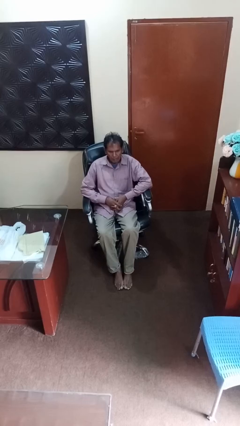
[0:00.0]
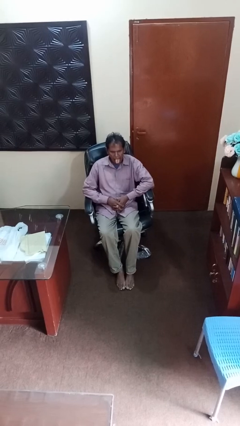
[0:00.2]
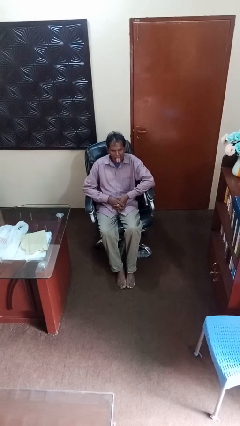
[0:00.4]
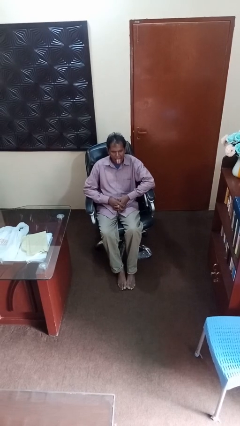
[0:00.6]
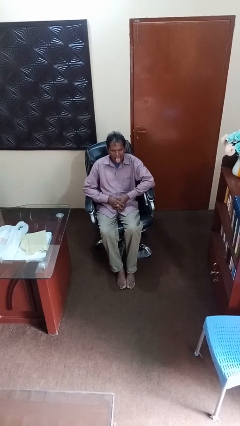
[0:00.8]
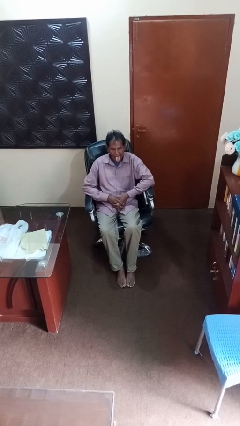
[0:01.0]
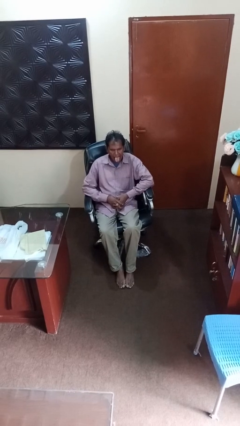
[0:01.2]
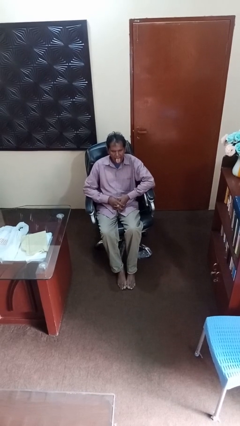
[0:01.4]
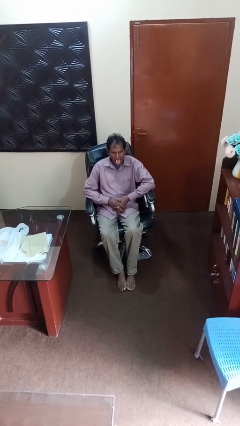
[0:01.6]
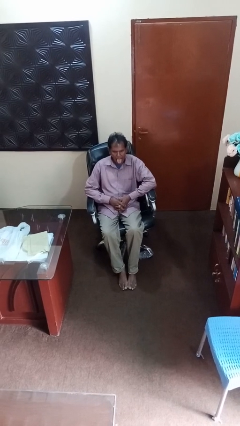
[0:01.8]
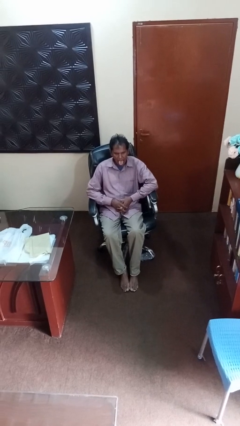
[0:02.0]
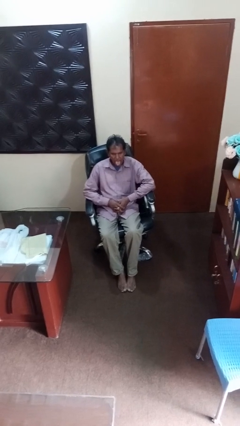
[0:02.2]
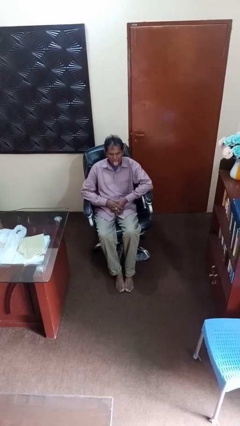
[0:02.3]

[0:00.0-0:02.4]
person sticks out tongue

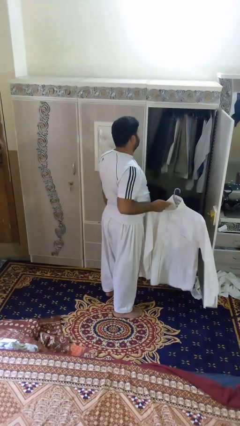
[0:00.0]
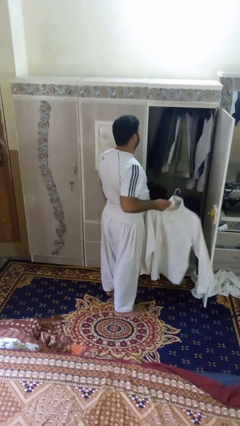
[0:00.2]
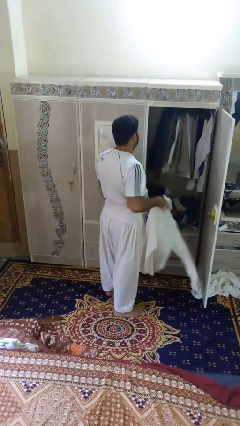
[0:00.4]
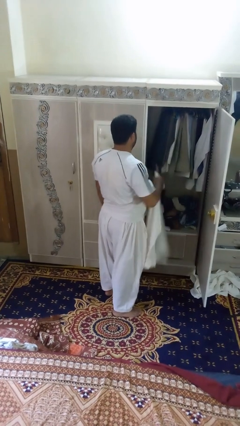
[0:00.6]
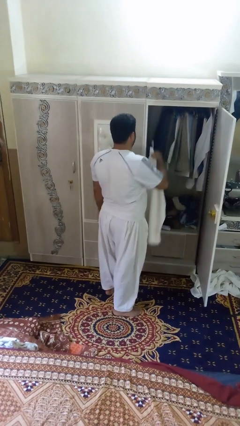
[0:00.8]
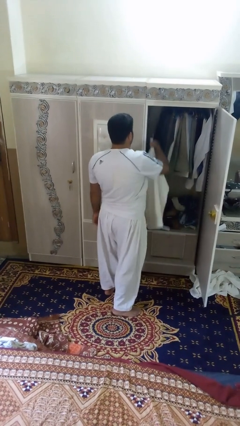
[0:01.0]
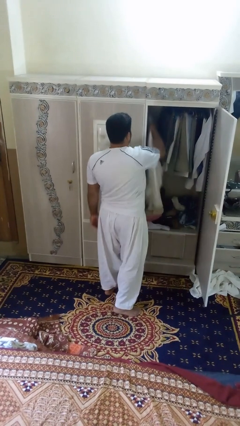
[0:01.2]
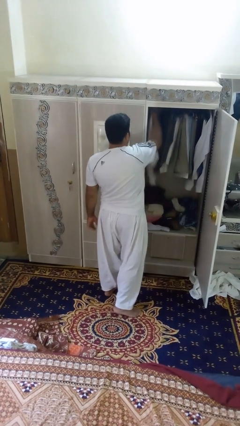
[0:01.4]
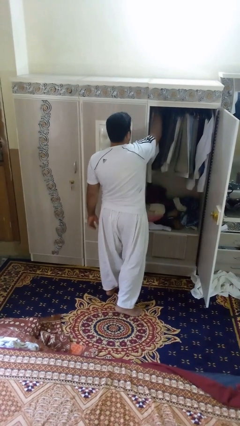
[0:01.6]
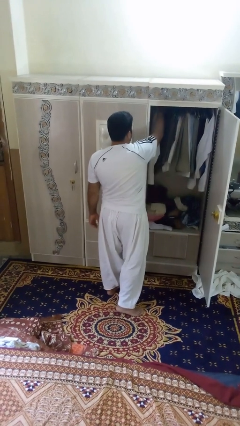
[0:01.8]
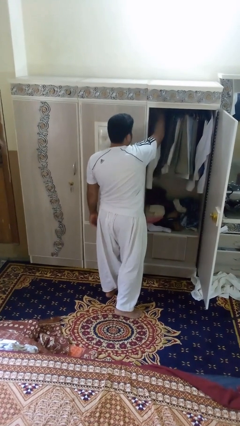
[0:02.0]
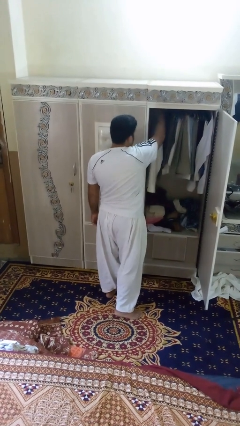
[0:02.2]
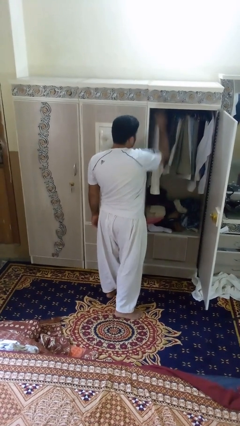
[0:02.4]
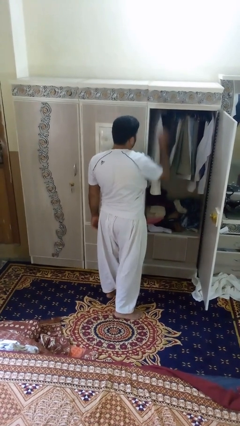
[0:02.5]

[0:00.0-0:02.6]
person puts clothes into closet

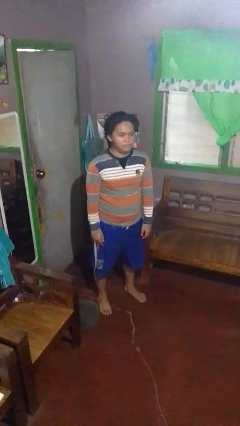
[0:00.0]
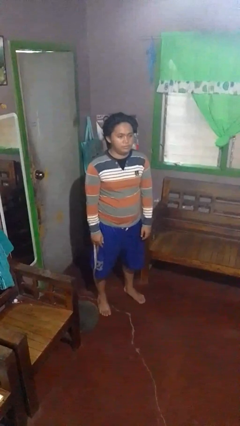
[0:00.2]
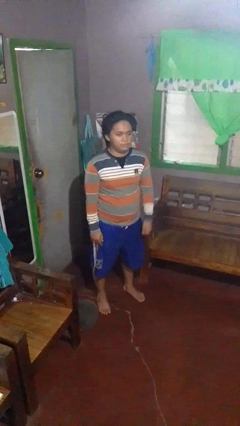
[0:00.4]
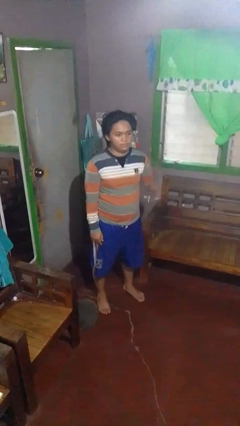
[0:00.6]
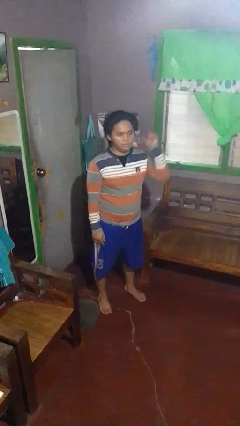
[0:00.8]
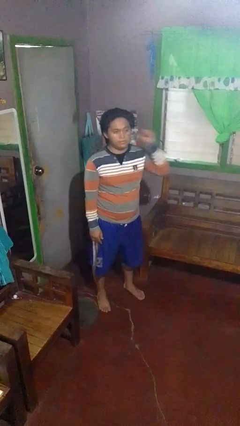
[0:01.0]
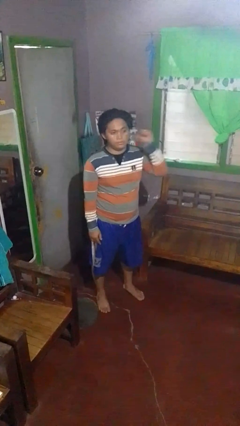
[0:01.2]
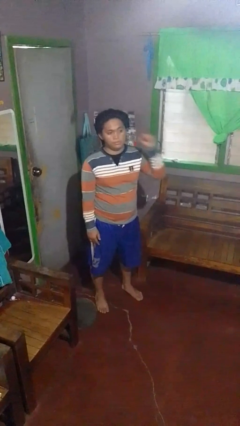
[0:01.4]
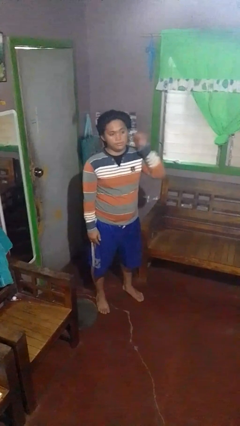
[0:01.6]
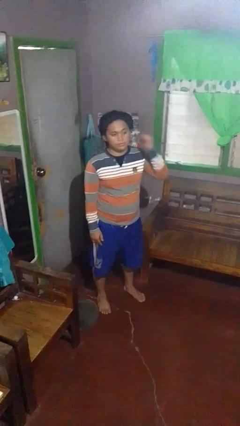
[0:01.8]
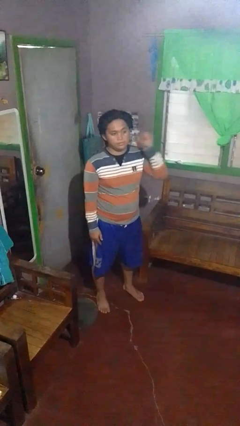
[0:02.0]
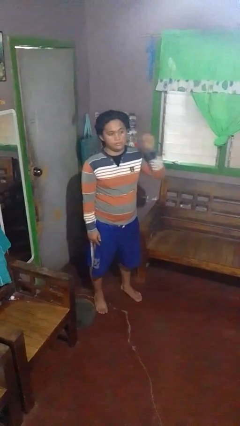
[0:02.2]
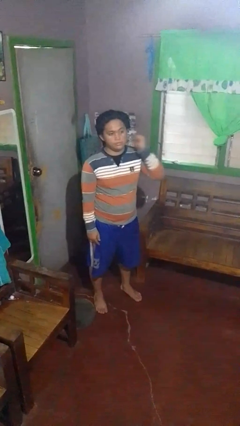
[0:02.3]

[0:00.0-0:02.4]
person gestures behind me

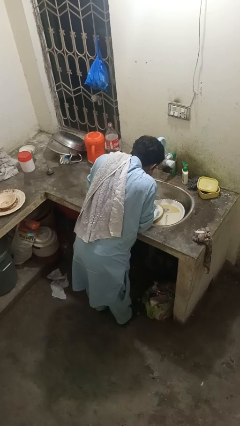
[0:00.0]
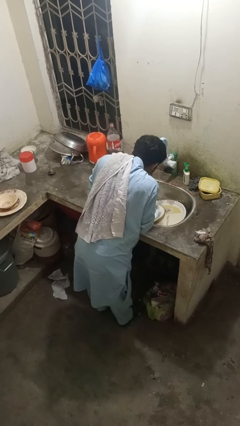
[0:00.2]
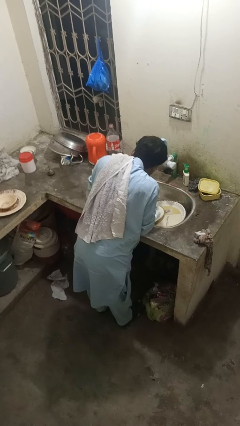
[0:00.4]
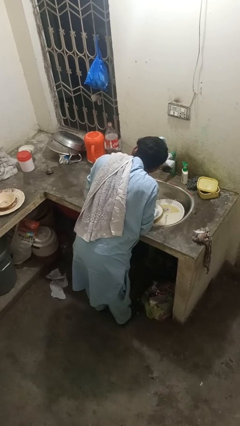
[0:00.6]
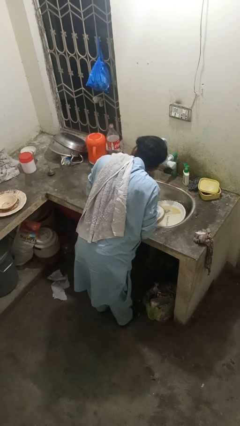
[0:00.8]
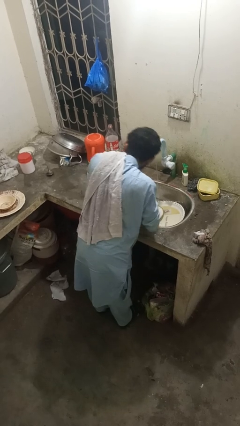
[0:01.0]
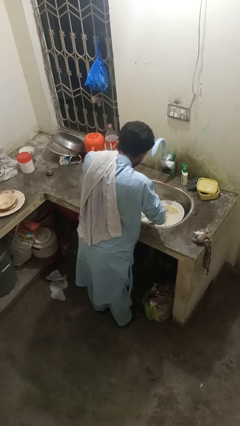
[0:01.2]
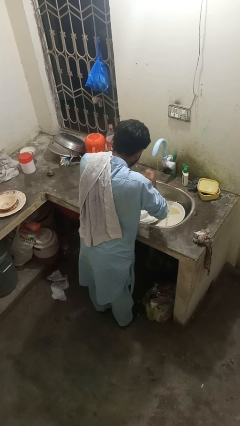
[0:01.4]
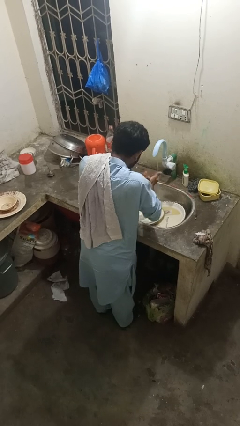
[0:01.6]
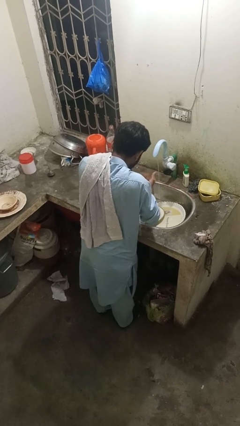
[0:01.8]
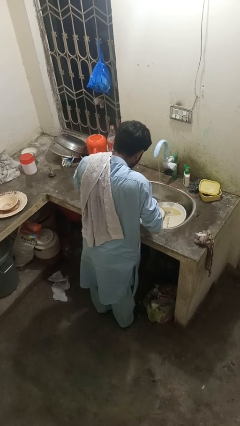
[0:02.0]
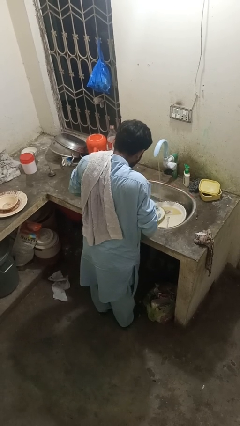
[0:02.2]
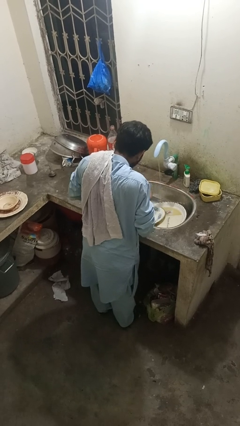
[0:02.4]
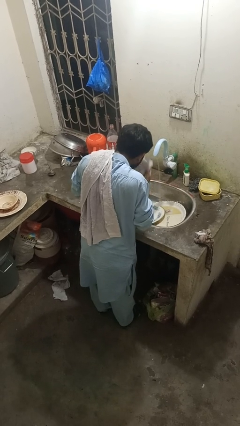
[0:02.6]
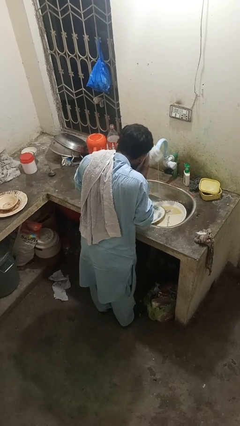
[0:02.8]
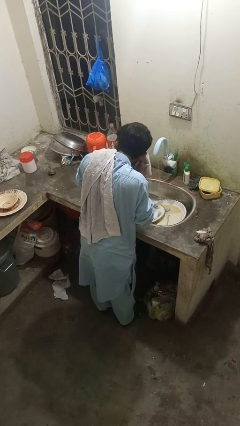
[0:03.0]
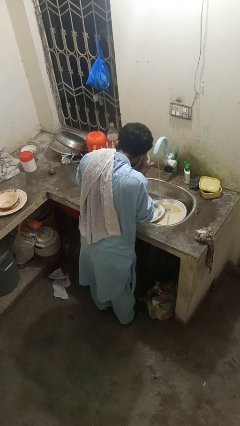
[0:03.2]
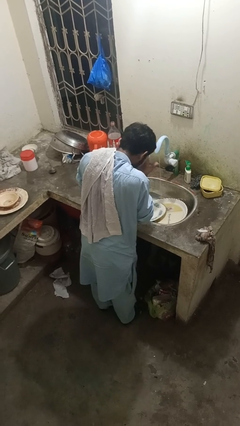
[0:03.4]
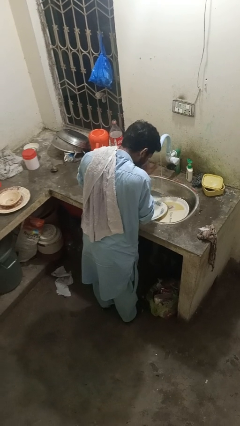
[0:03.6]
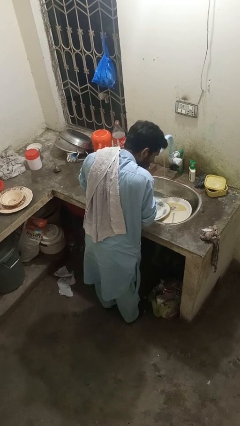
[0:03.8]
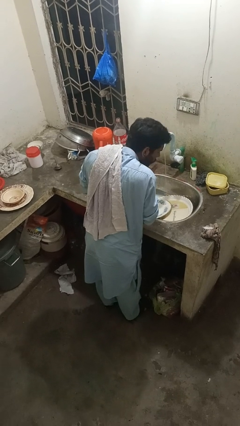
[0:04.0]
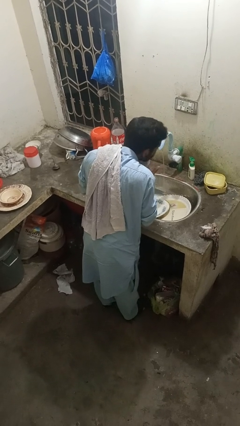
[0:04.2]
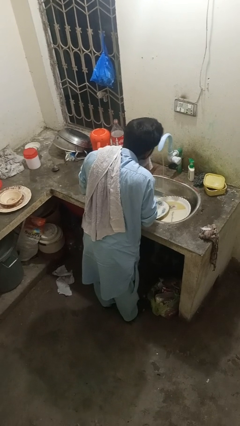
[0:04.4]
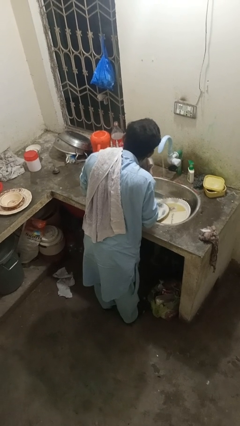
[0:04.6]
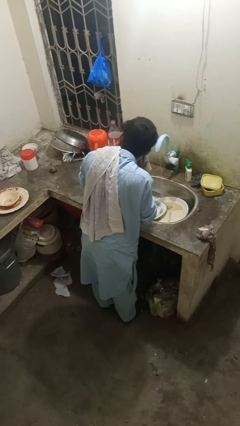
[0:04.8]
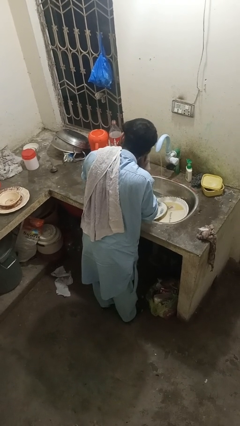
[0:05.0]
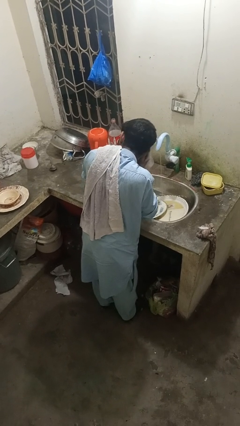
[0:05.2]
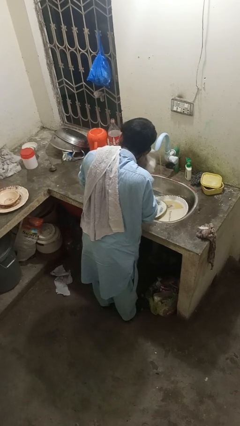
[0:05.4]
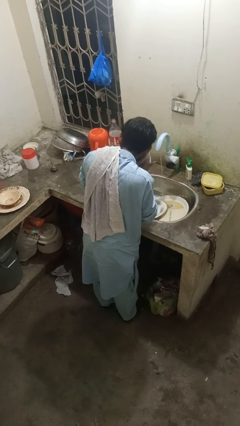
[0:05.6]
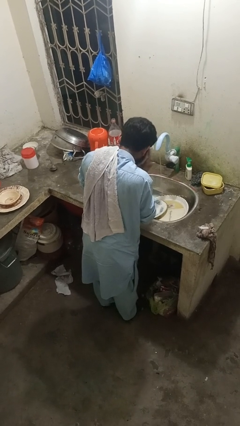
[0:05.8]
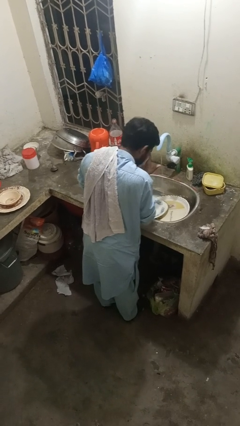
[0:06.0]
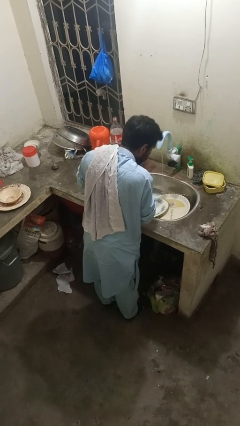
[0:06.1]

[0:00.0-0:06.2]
person dries face with towel

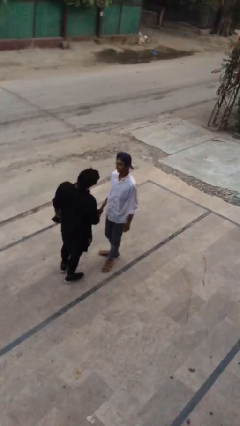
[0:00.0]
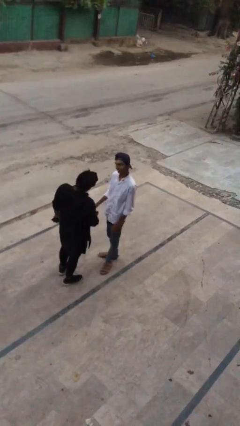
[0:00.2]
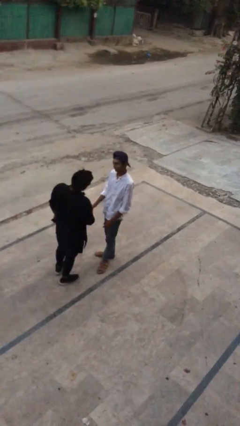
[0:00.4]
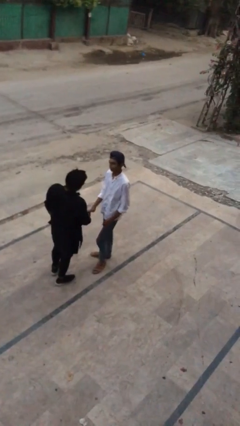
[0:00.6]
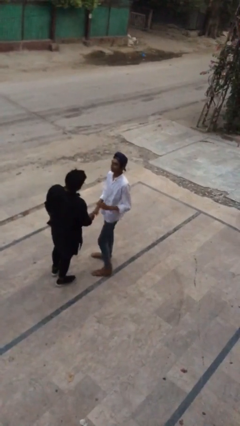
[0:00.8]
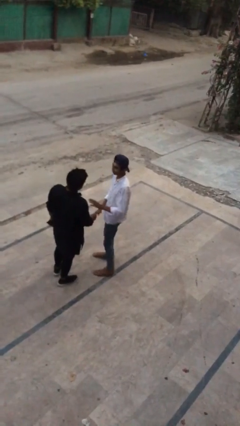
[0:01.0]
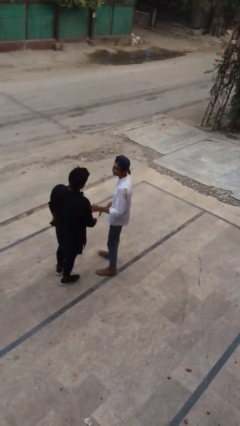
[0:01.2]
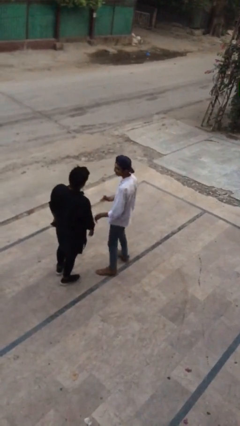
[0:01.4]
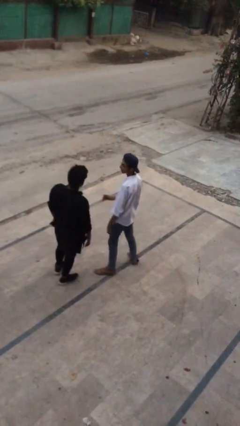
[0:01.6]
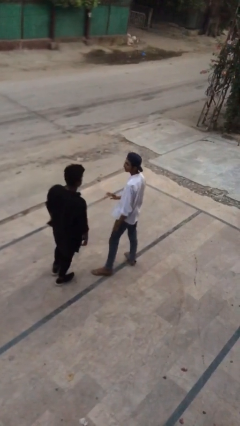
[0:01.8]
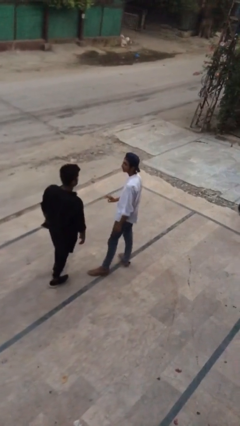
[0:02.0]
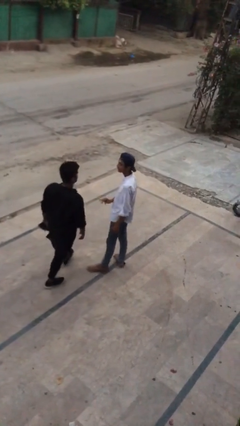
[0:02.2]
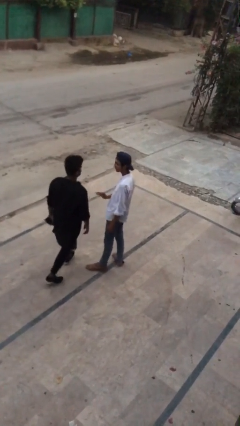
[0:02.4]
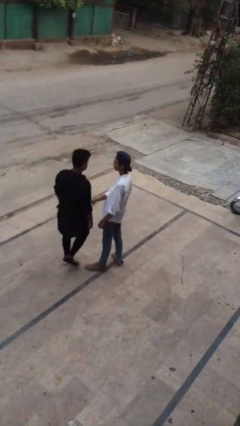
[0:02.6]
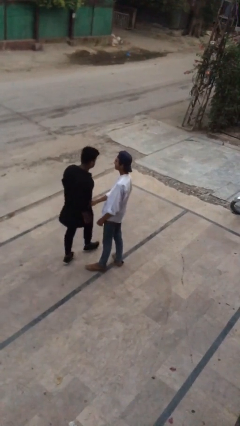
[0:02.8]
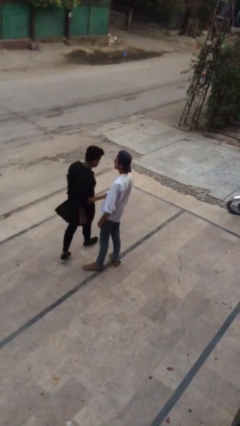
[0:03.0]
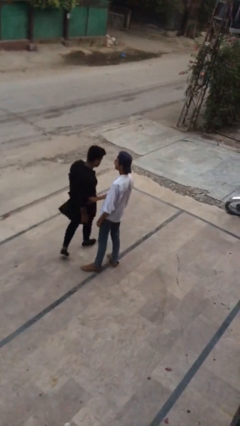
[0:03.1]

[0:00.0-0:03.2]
person talks to person

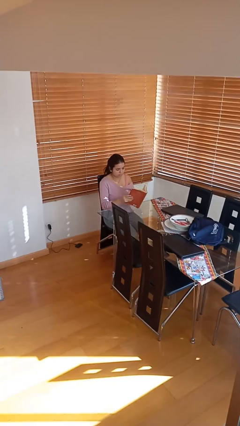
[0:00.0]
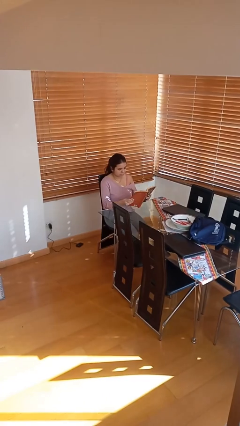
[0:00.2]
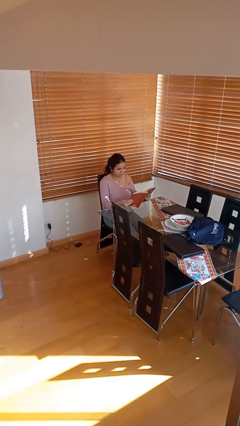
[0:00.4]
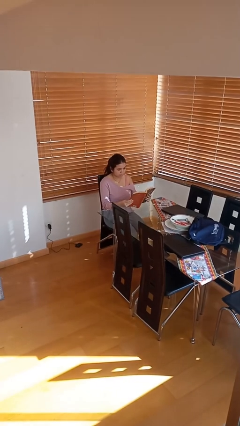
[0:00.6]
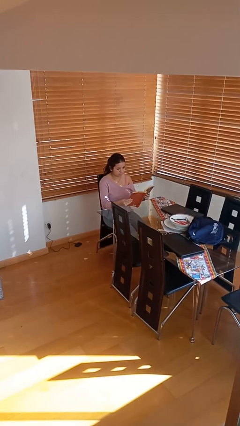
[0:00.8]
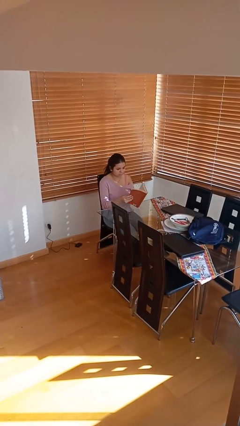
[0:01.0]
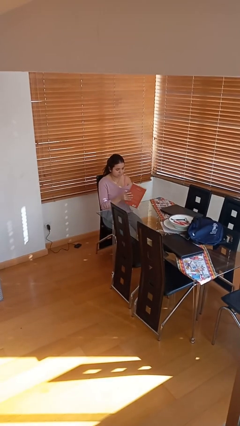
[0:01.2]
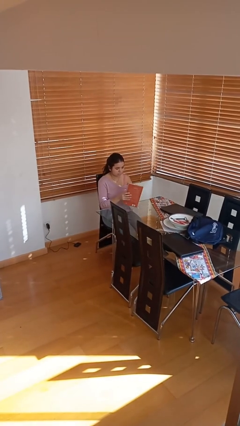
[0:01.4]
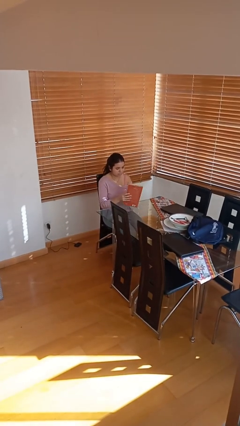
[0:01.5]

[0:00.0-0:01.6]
person reads document
